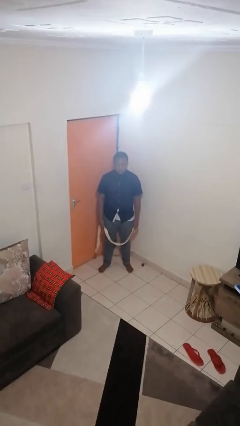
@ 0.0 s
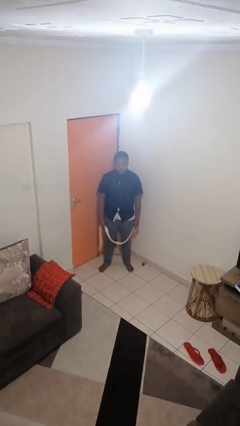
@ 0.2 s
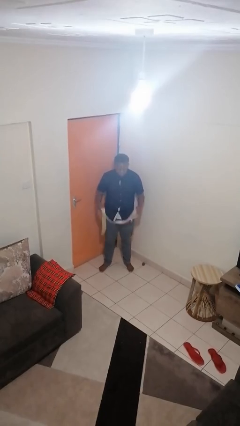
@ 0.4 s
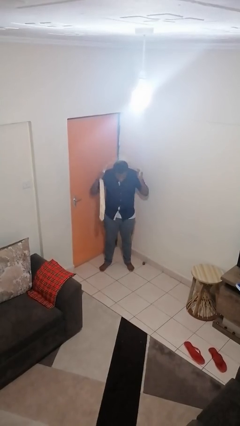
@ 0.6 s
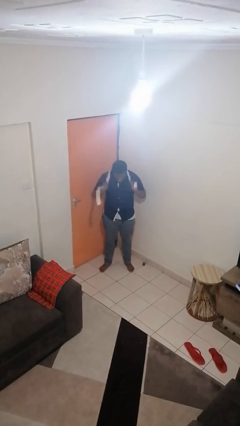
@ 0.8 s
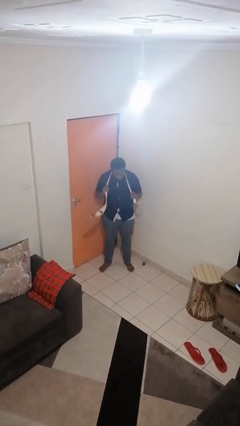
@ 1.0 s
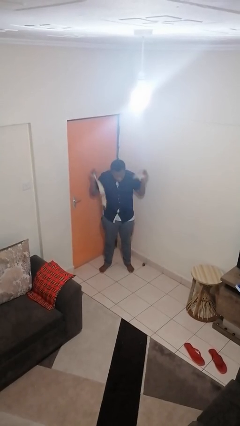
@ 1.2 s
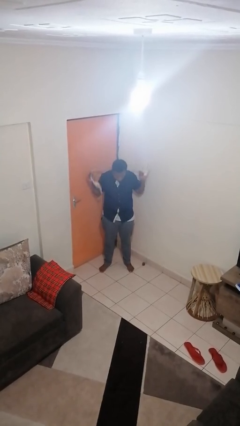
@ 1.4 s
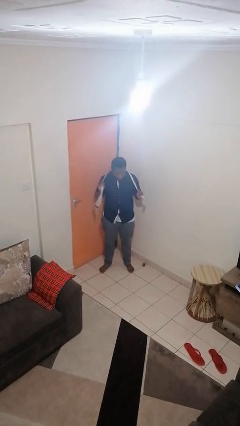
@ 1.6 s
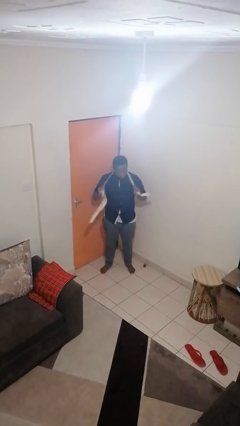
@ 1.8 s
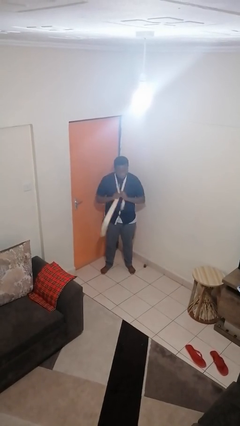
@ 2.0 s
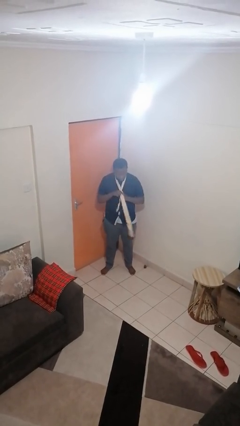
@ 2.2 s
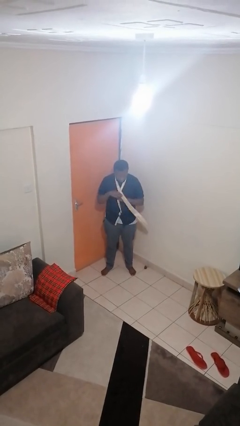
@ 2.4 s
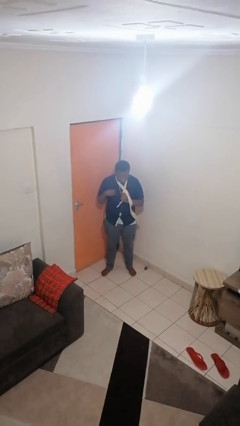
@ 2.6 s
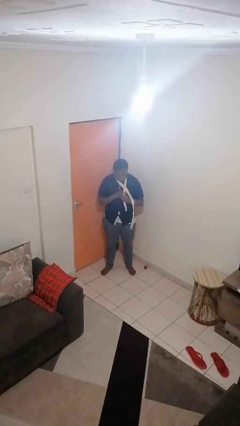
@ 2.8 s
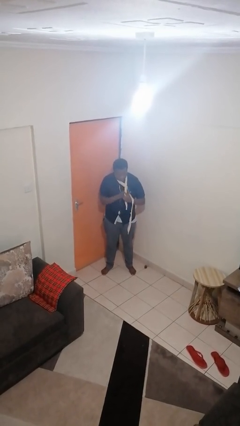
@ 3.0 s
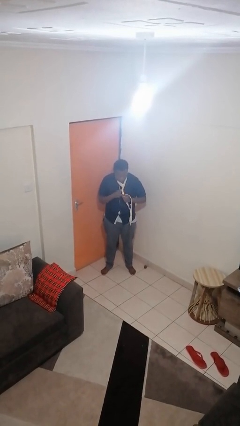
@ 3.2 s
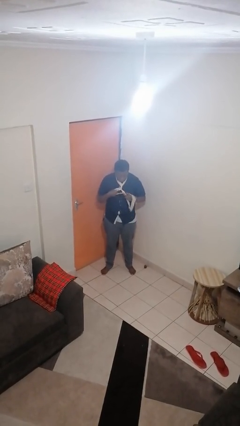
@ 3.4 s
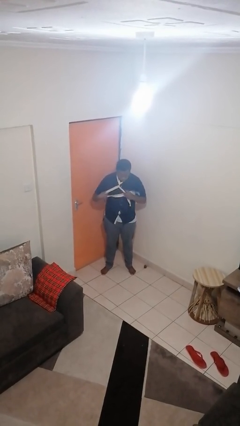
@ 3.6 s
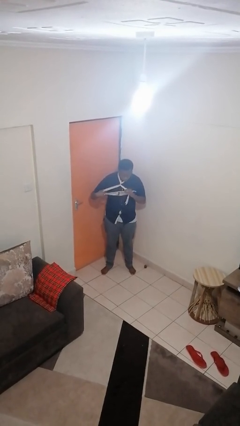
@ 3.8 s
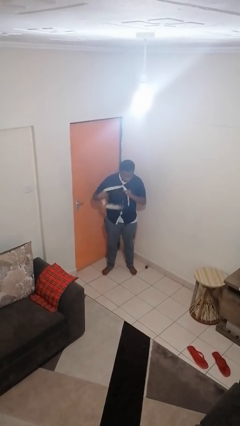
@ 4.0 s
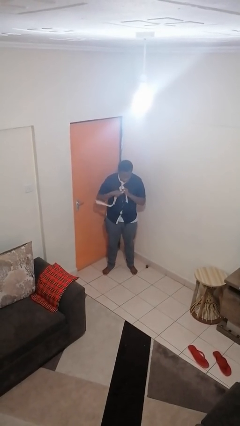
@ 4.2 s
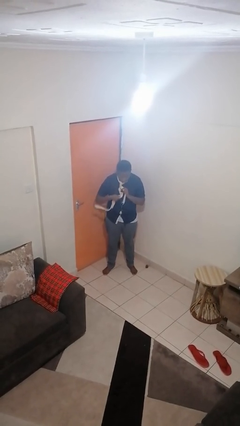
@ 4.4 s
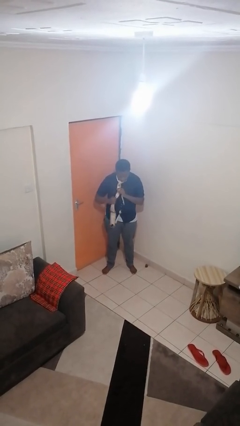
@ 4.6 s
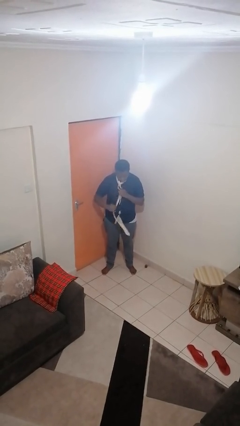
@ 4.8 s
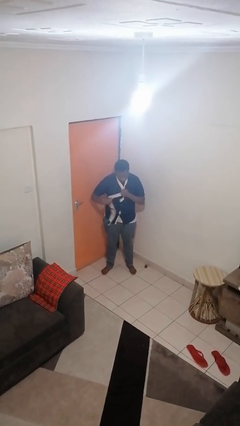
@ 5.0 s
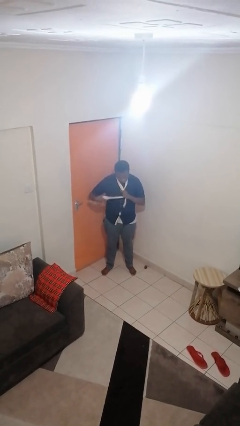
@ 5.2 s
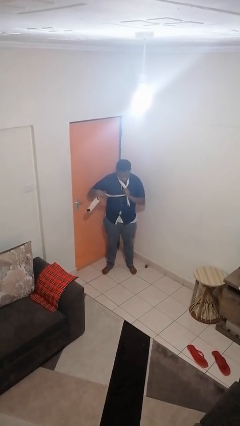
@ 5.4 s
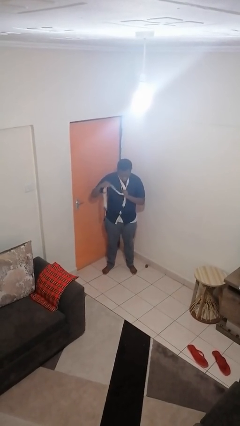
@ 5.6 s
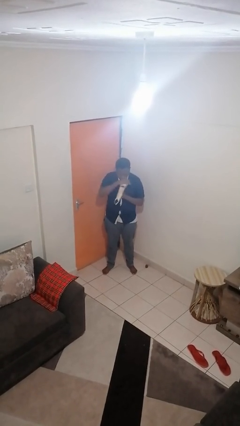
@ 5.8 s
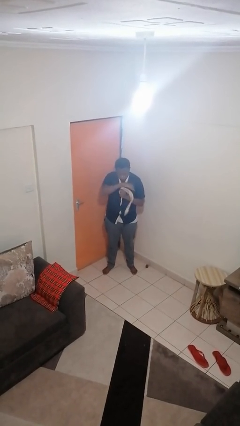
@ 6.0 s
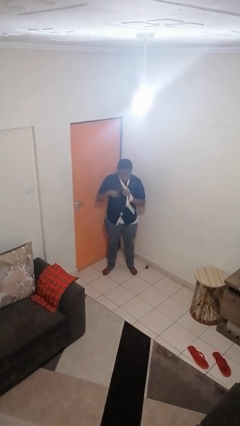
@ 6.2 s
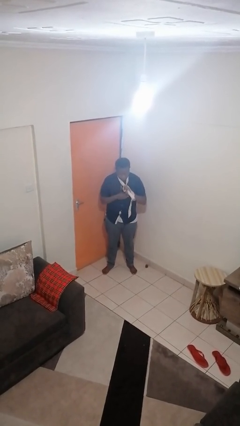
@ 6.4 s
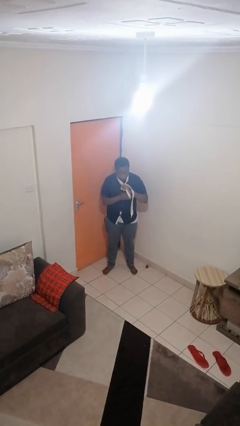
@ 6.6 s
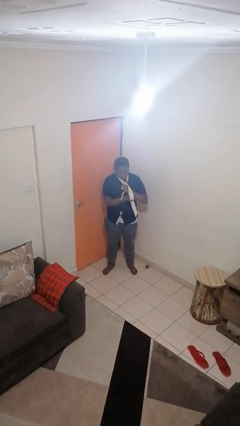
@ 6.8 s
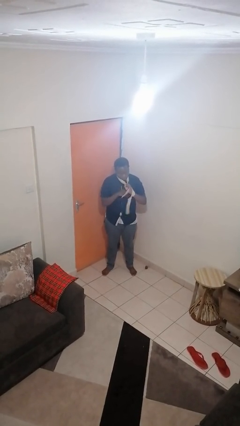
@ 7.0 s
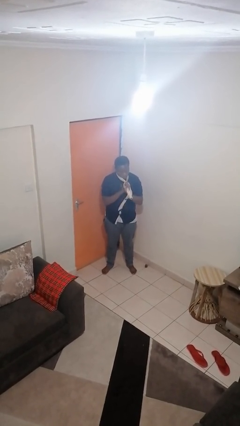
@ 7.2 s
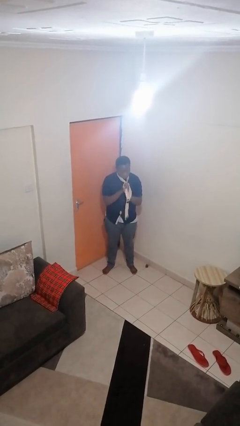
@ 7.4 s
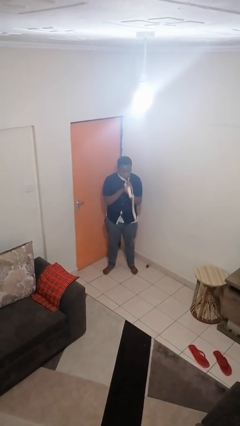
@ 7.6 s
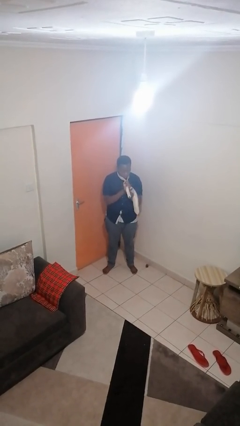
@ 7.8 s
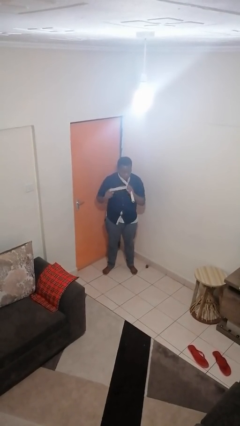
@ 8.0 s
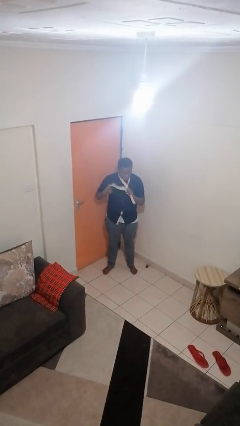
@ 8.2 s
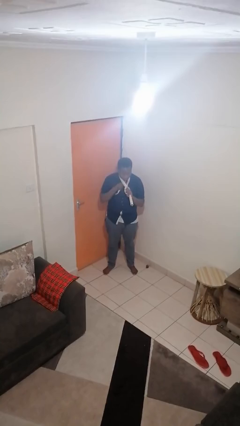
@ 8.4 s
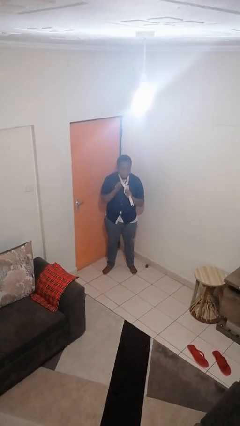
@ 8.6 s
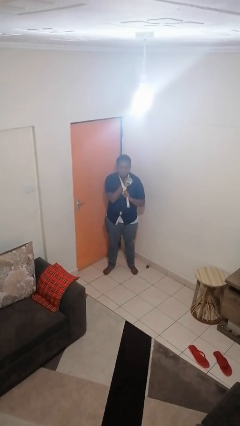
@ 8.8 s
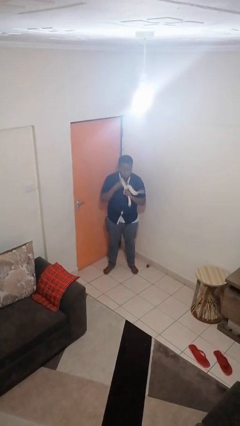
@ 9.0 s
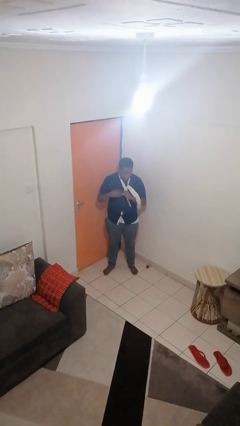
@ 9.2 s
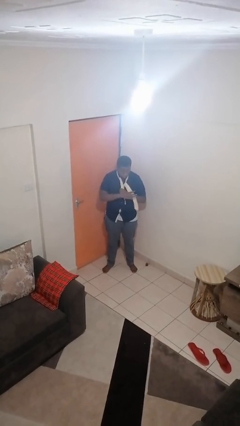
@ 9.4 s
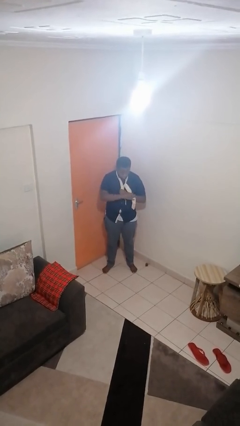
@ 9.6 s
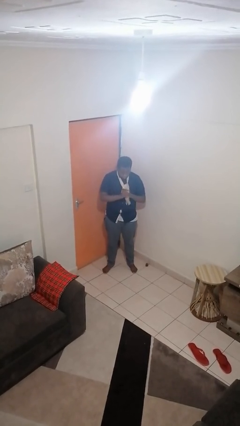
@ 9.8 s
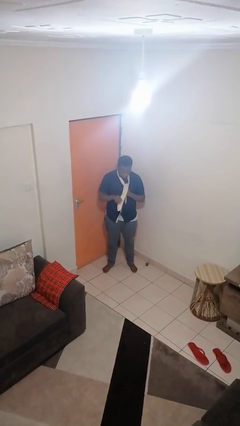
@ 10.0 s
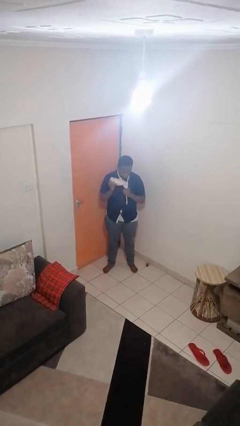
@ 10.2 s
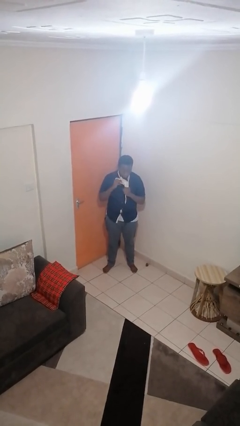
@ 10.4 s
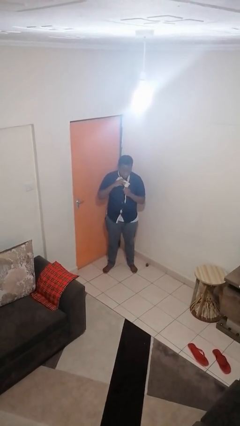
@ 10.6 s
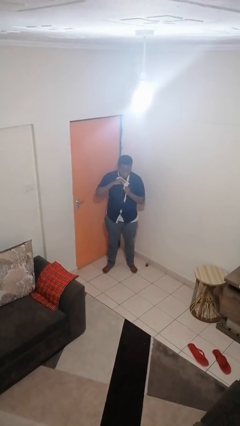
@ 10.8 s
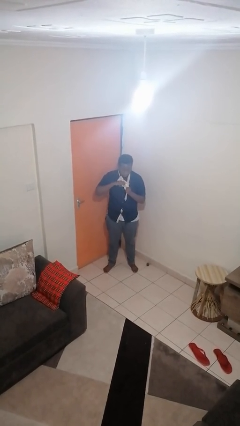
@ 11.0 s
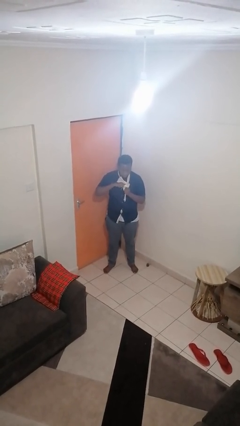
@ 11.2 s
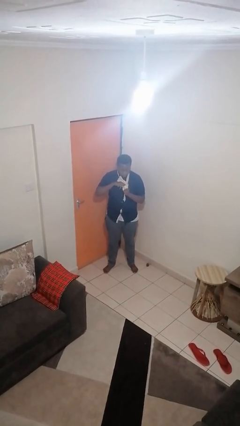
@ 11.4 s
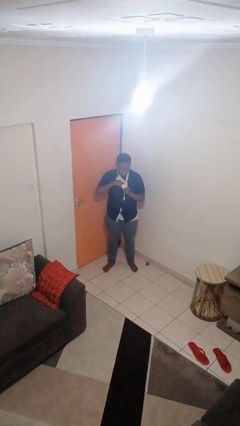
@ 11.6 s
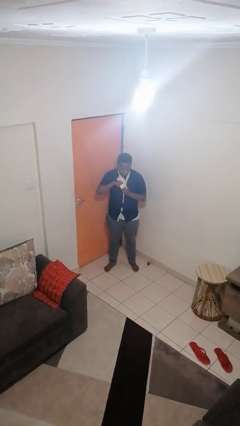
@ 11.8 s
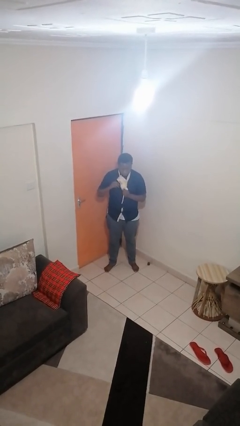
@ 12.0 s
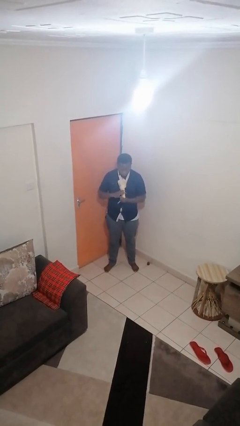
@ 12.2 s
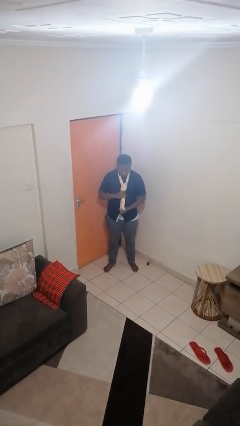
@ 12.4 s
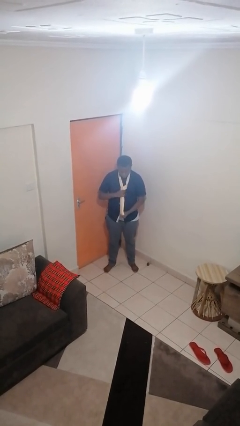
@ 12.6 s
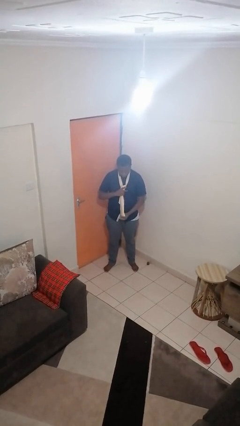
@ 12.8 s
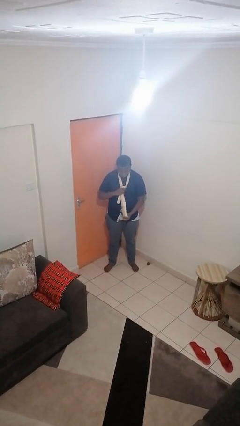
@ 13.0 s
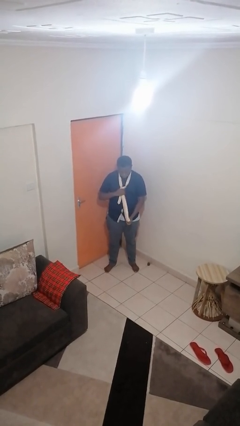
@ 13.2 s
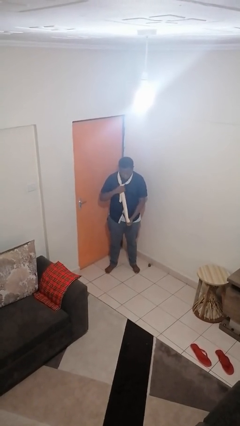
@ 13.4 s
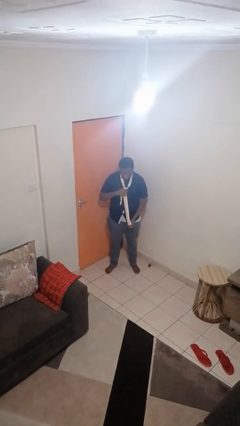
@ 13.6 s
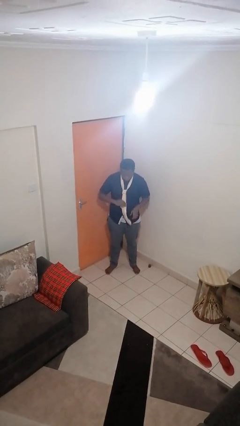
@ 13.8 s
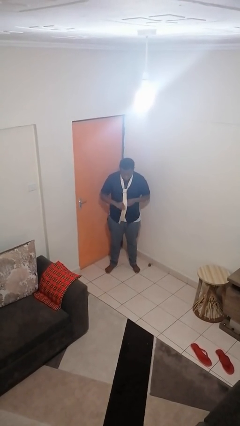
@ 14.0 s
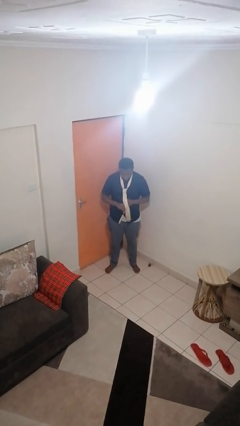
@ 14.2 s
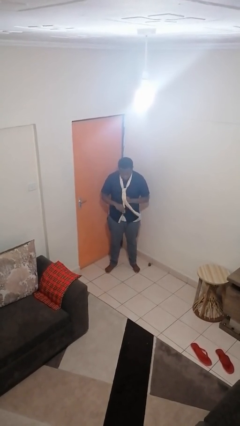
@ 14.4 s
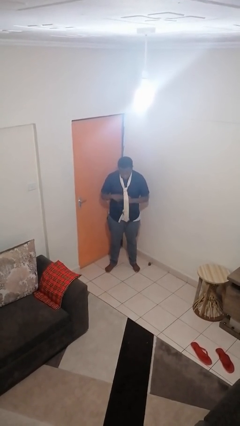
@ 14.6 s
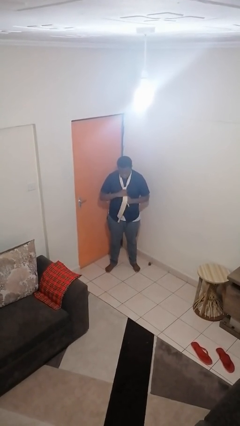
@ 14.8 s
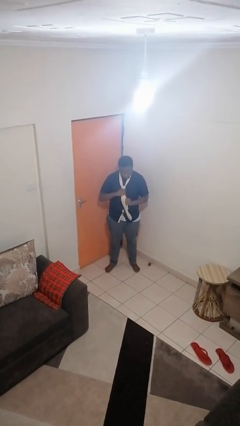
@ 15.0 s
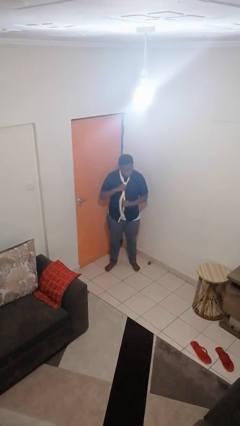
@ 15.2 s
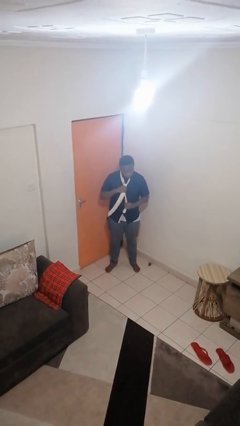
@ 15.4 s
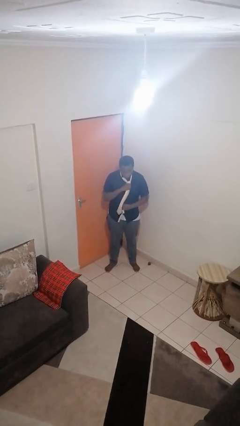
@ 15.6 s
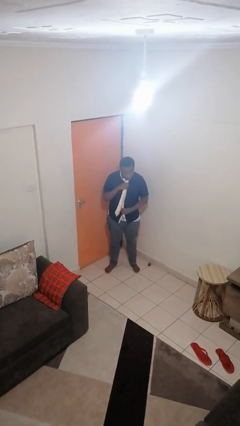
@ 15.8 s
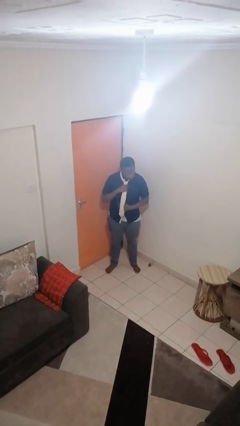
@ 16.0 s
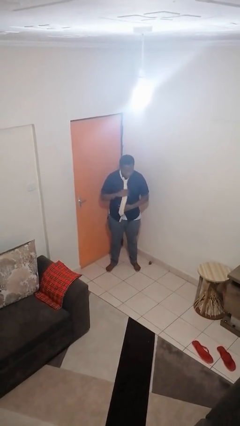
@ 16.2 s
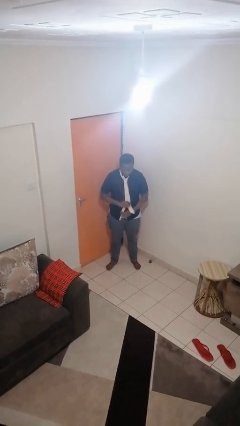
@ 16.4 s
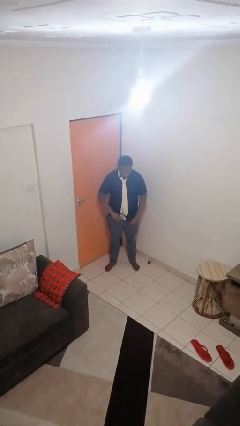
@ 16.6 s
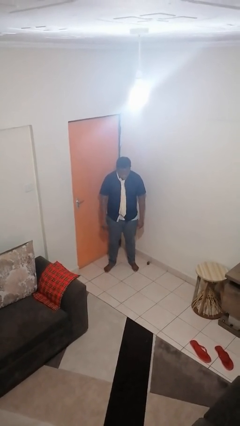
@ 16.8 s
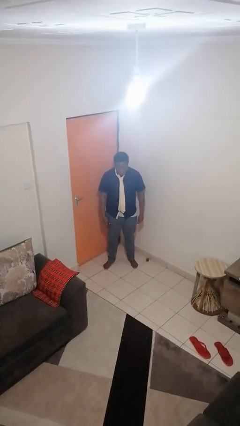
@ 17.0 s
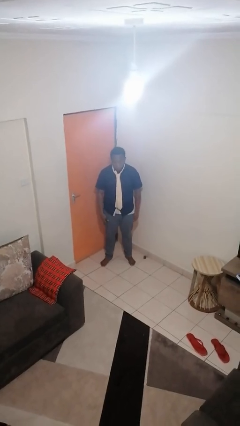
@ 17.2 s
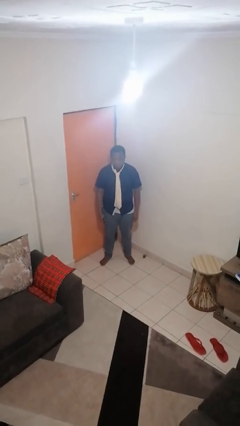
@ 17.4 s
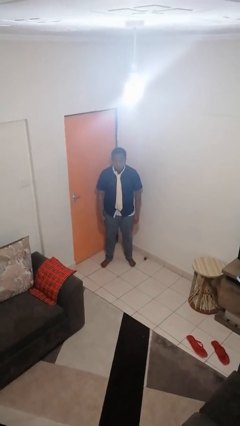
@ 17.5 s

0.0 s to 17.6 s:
person puts on necktie

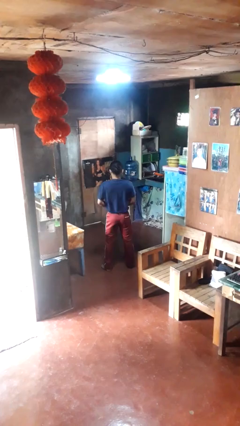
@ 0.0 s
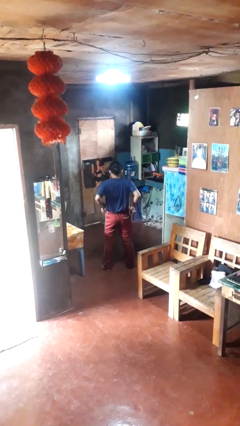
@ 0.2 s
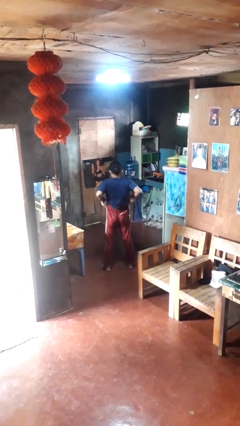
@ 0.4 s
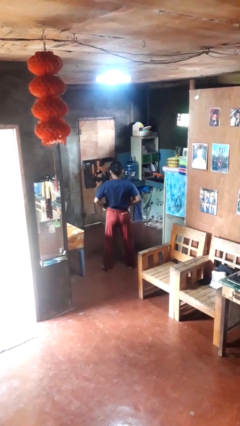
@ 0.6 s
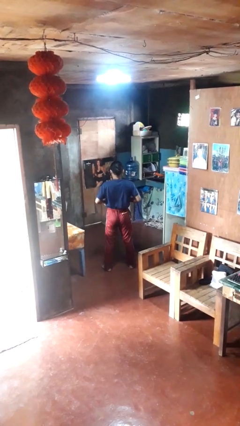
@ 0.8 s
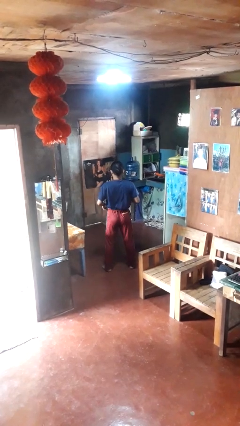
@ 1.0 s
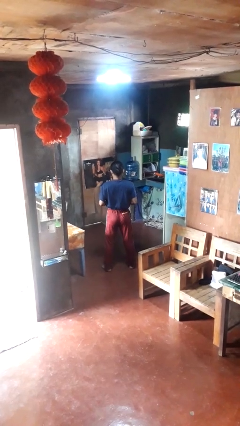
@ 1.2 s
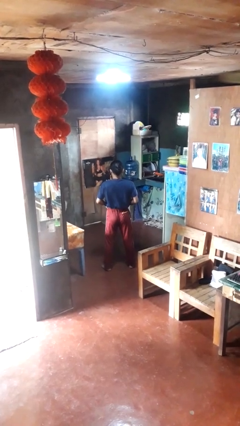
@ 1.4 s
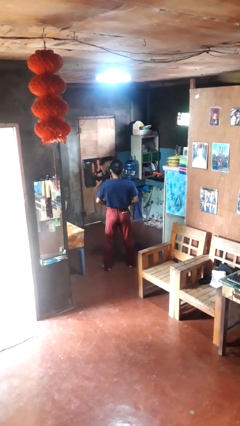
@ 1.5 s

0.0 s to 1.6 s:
person hikes up pants
